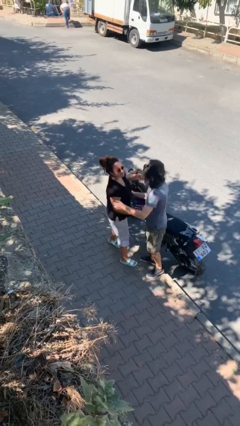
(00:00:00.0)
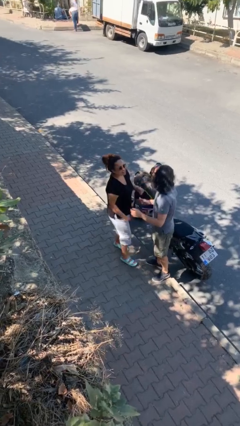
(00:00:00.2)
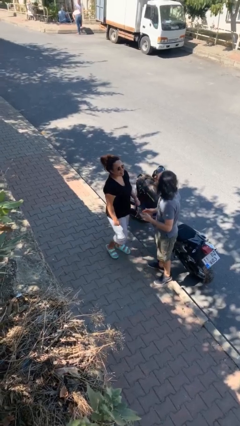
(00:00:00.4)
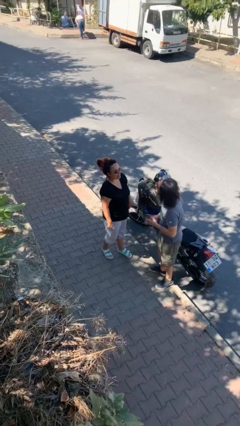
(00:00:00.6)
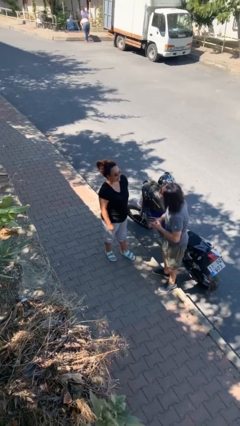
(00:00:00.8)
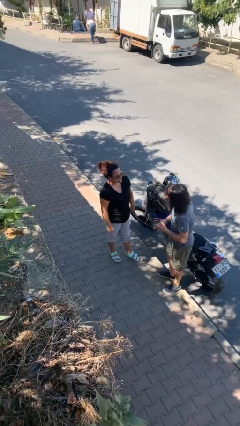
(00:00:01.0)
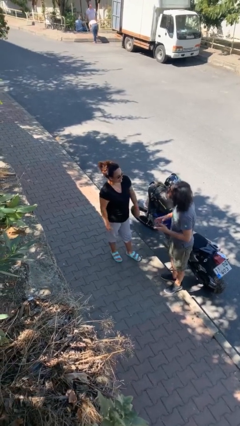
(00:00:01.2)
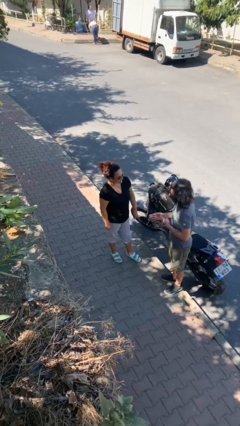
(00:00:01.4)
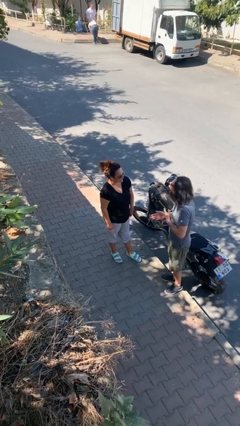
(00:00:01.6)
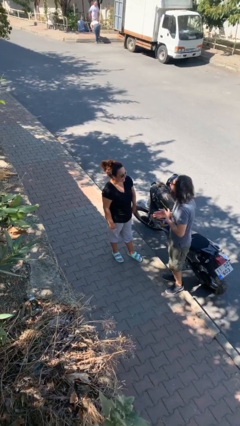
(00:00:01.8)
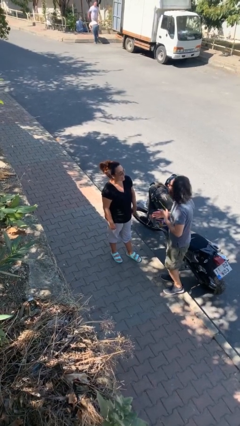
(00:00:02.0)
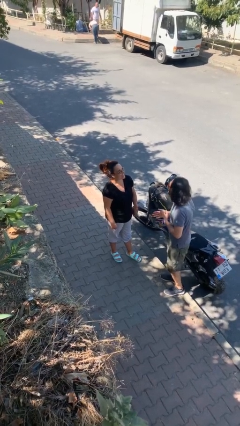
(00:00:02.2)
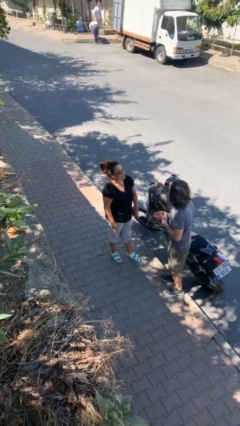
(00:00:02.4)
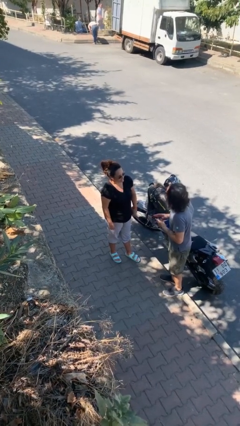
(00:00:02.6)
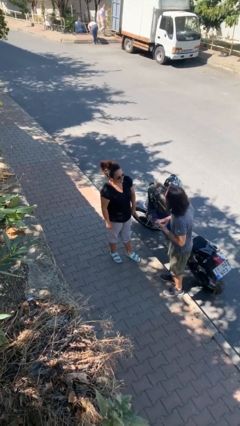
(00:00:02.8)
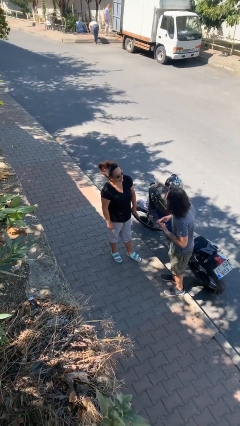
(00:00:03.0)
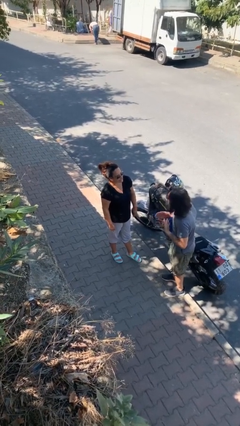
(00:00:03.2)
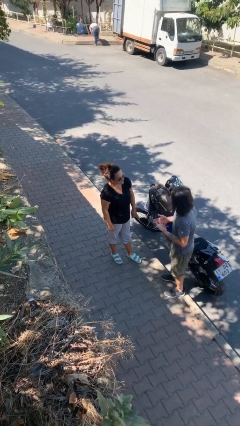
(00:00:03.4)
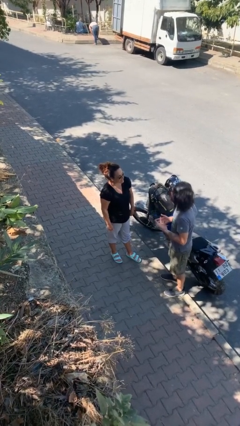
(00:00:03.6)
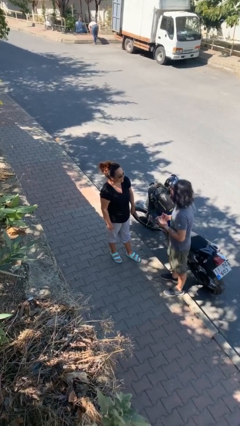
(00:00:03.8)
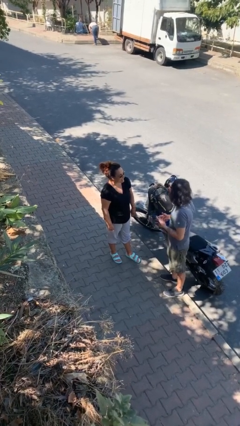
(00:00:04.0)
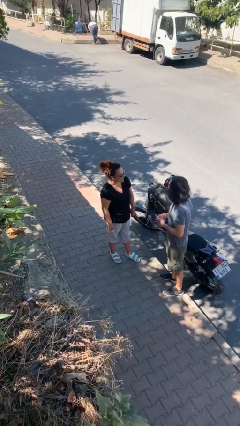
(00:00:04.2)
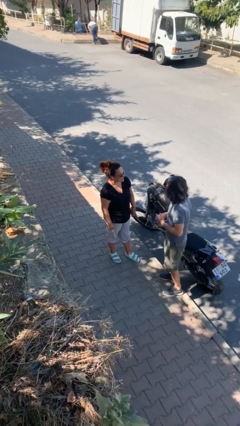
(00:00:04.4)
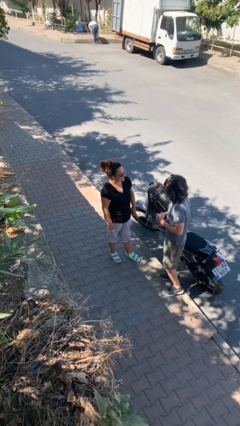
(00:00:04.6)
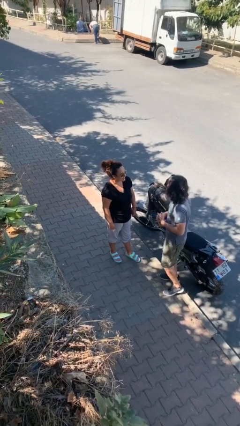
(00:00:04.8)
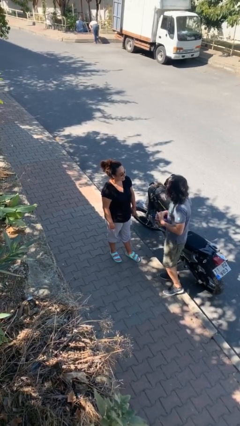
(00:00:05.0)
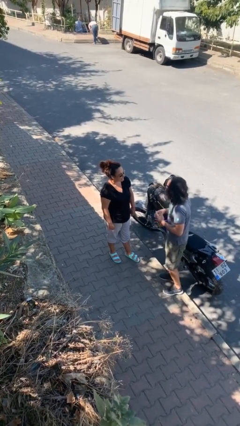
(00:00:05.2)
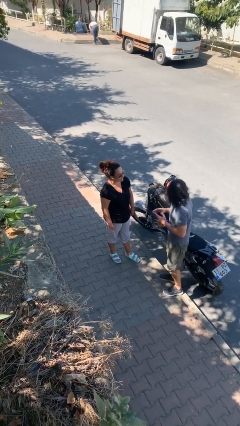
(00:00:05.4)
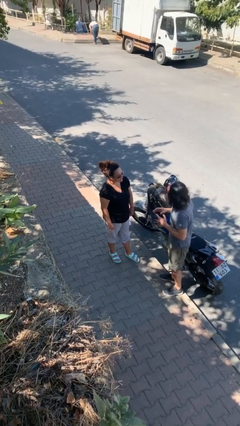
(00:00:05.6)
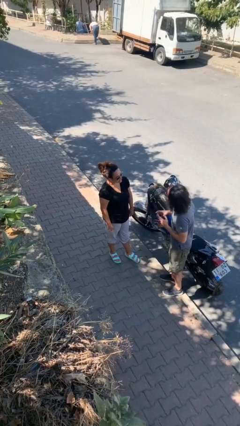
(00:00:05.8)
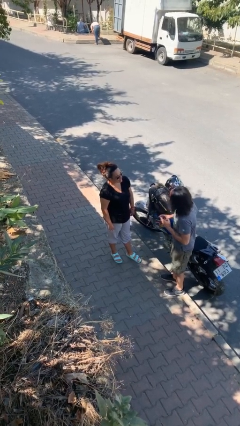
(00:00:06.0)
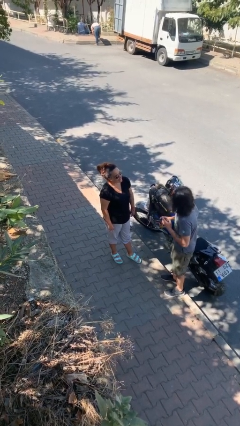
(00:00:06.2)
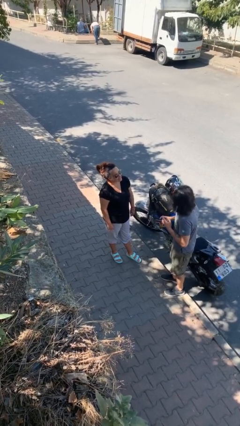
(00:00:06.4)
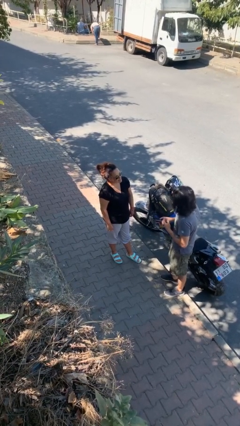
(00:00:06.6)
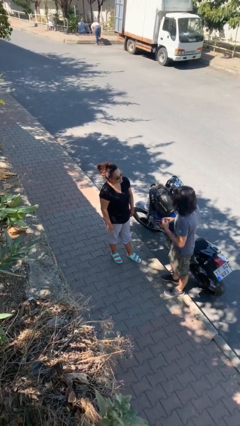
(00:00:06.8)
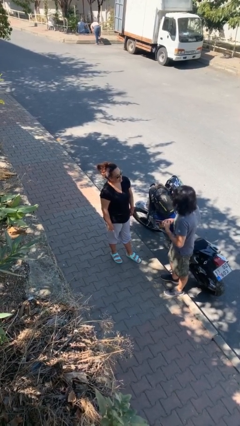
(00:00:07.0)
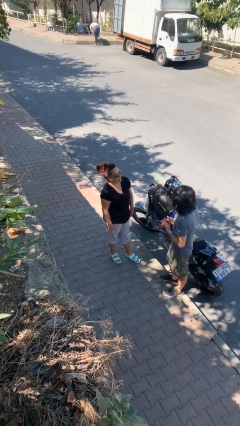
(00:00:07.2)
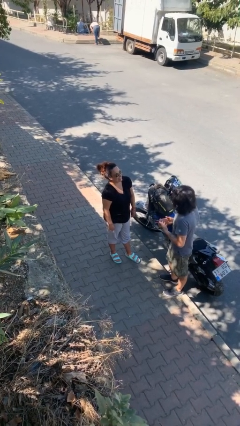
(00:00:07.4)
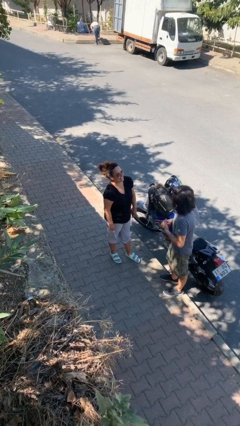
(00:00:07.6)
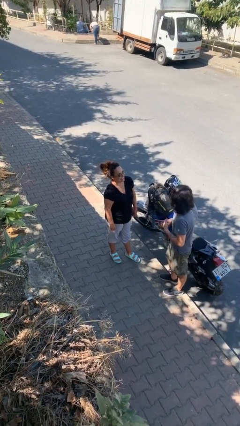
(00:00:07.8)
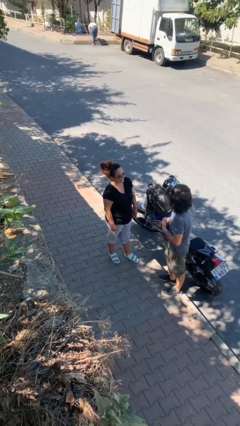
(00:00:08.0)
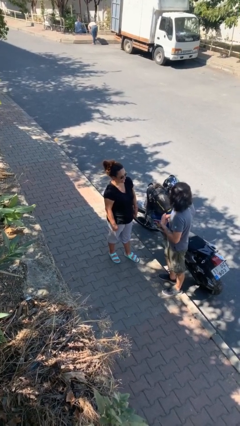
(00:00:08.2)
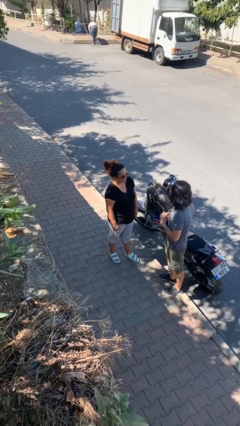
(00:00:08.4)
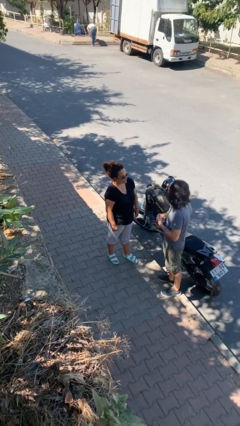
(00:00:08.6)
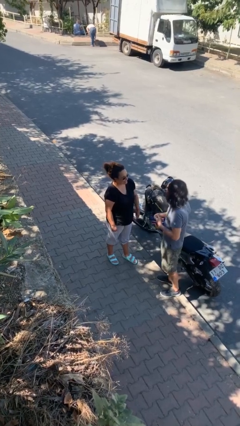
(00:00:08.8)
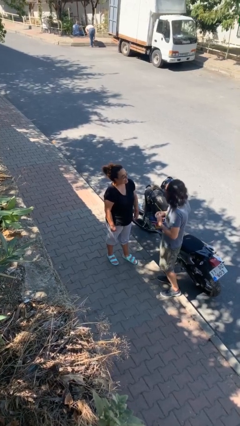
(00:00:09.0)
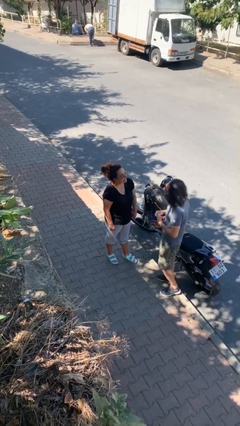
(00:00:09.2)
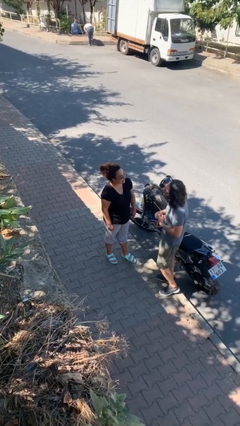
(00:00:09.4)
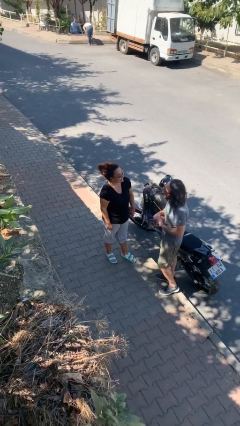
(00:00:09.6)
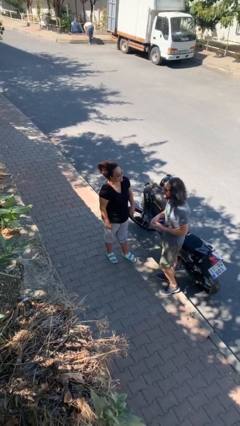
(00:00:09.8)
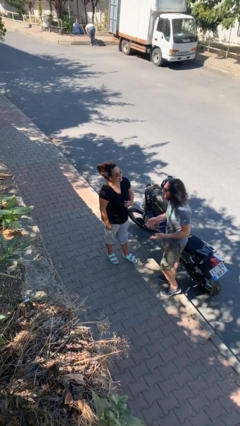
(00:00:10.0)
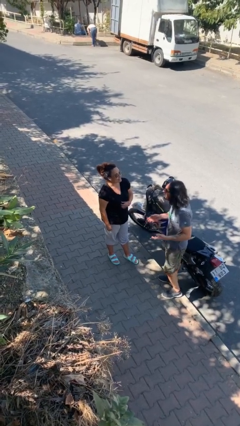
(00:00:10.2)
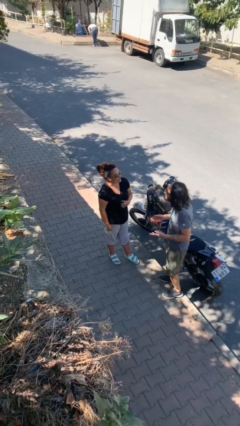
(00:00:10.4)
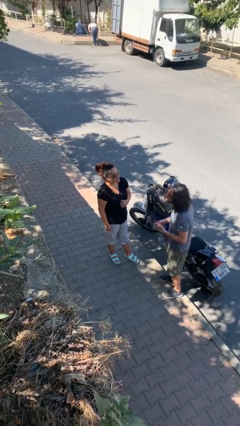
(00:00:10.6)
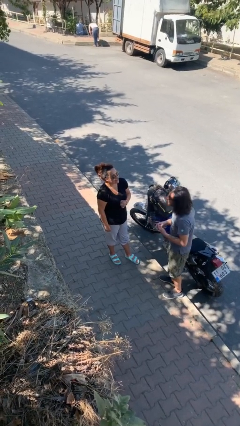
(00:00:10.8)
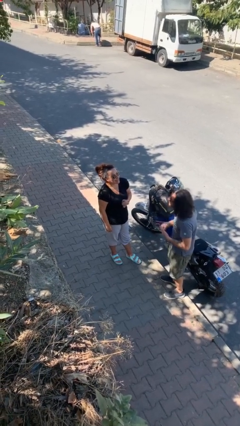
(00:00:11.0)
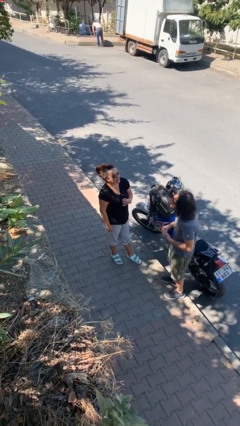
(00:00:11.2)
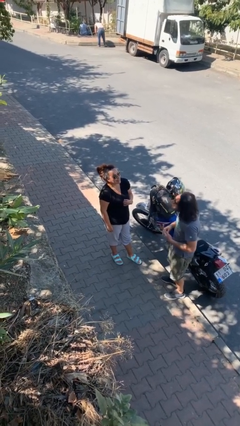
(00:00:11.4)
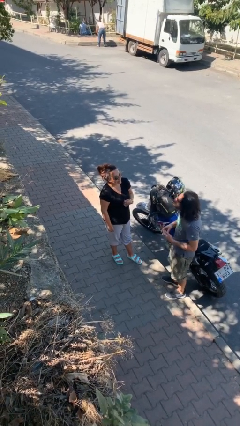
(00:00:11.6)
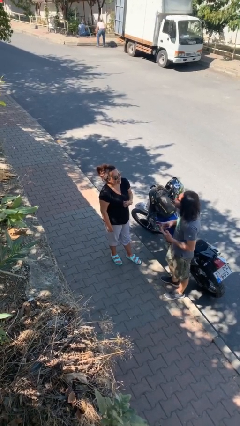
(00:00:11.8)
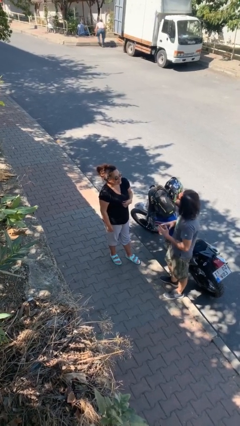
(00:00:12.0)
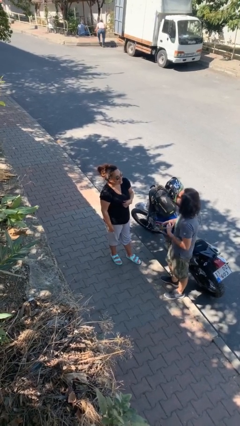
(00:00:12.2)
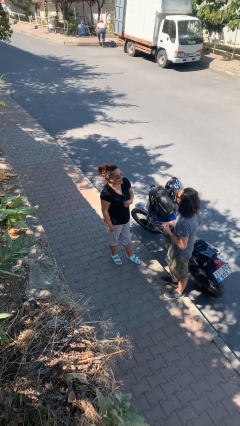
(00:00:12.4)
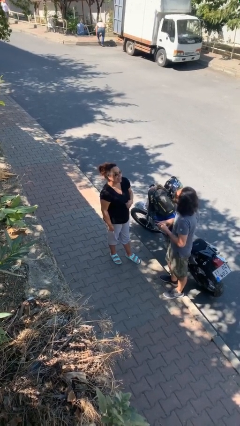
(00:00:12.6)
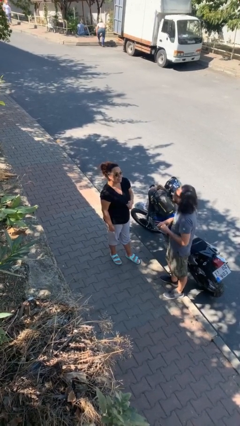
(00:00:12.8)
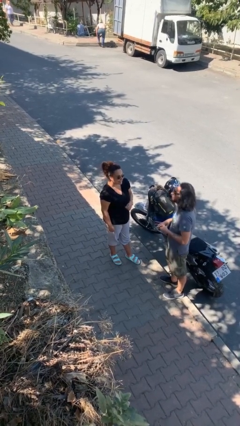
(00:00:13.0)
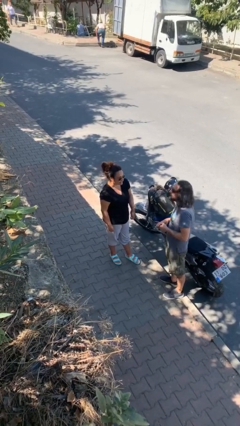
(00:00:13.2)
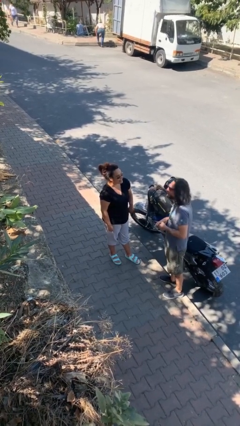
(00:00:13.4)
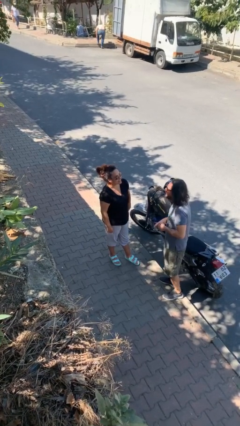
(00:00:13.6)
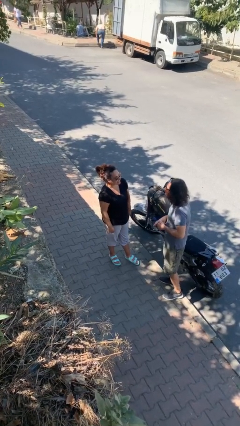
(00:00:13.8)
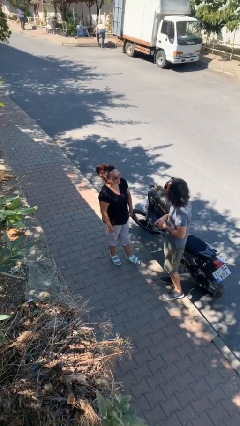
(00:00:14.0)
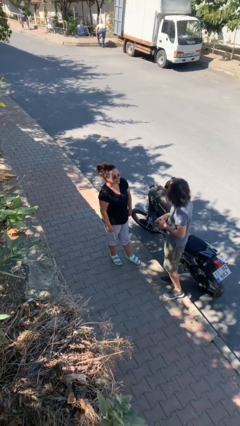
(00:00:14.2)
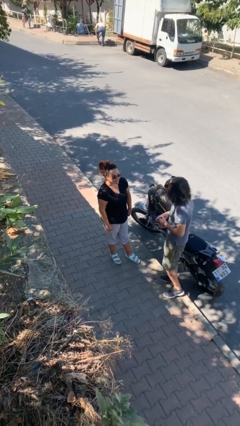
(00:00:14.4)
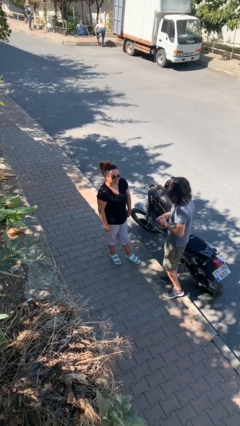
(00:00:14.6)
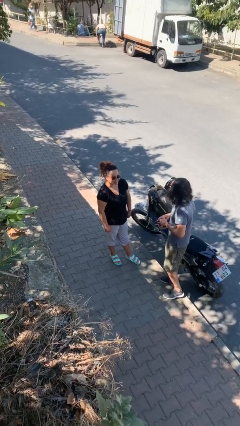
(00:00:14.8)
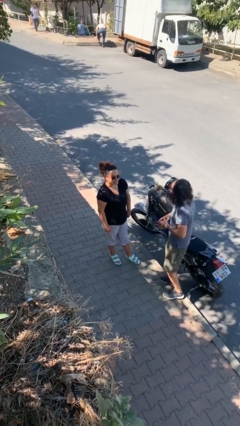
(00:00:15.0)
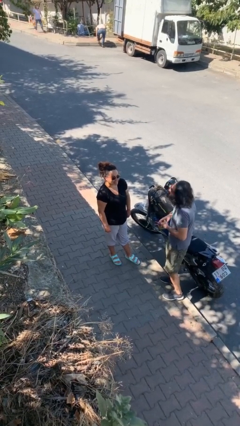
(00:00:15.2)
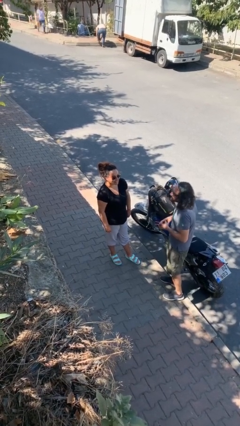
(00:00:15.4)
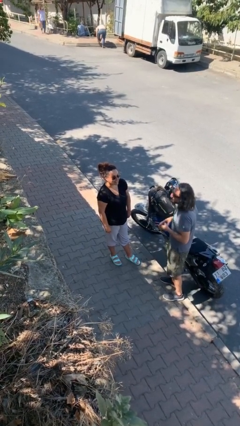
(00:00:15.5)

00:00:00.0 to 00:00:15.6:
person talks to person

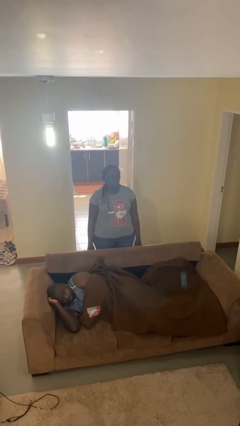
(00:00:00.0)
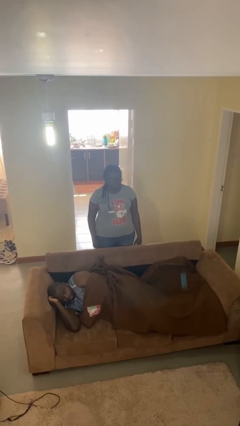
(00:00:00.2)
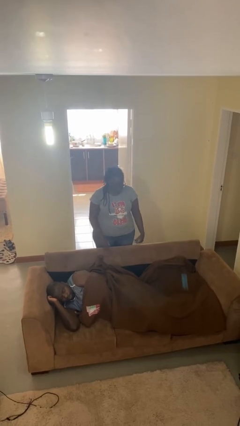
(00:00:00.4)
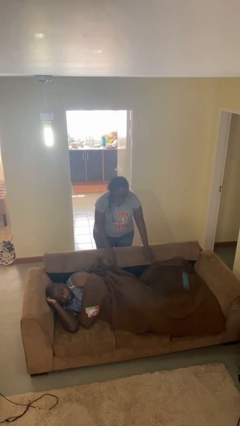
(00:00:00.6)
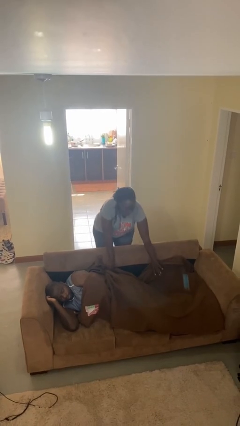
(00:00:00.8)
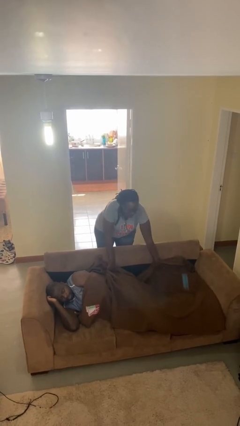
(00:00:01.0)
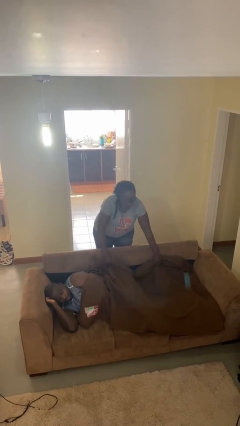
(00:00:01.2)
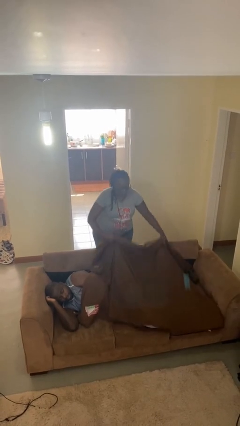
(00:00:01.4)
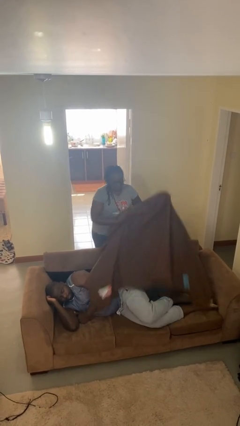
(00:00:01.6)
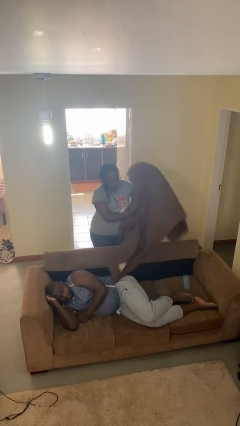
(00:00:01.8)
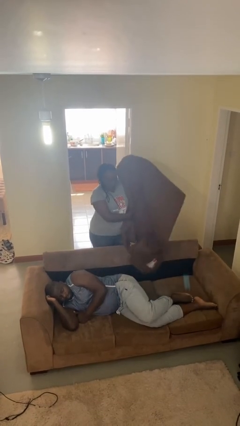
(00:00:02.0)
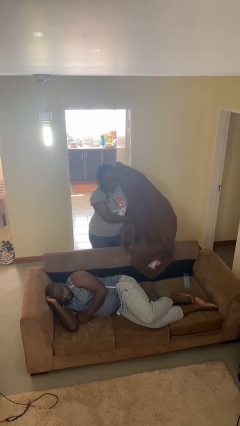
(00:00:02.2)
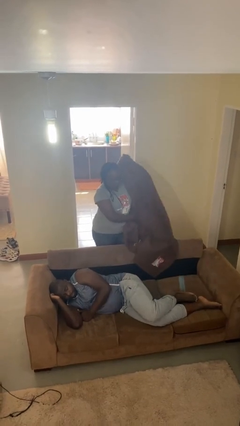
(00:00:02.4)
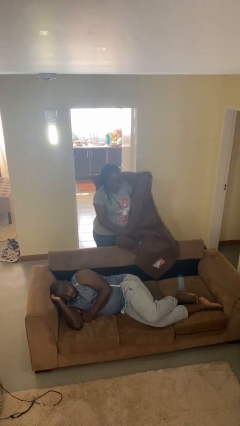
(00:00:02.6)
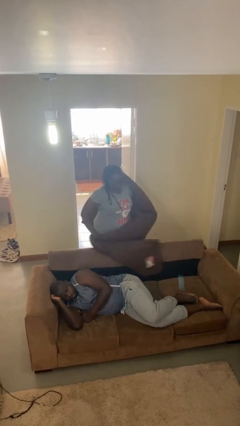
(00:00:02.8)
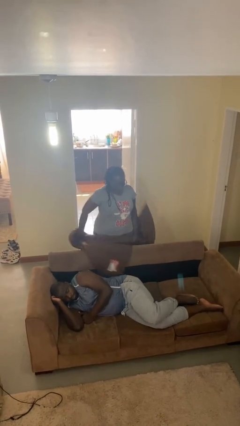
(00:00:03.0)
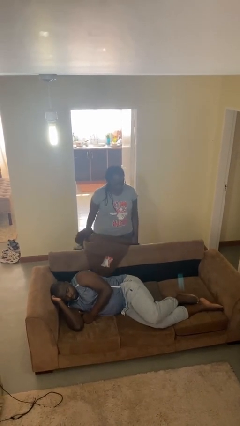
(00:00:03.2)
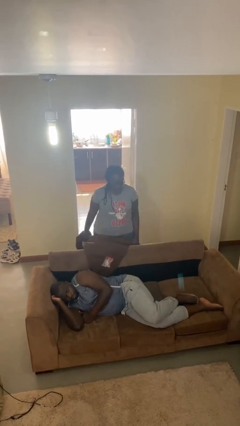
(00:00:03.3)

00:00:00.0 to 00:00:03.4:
person uncovers friend with blanket
